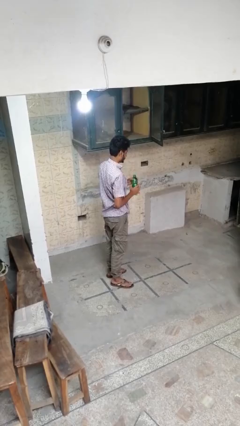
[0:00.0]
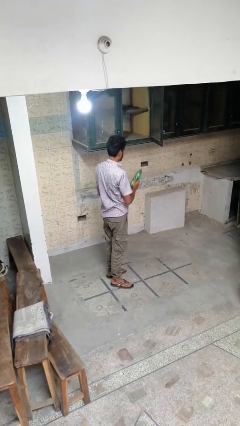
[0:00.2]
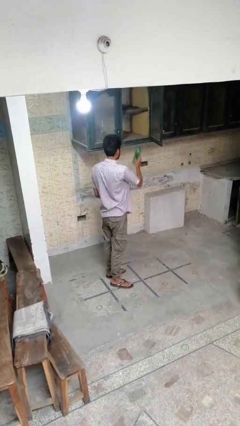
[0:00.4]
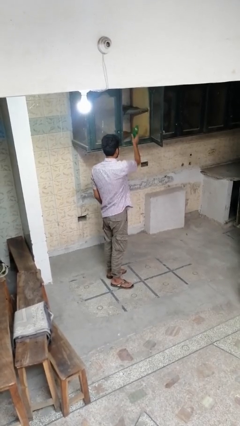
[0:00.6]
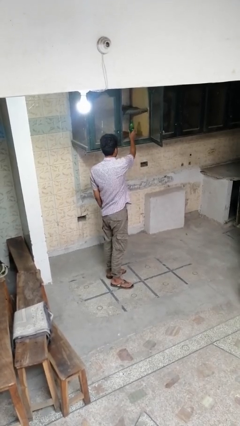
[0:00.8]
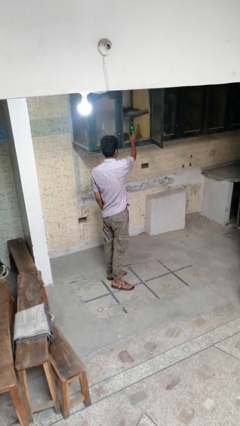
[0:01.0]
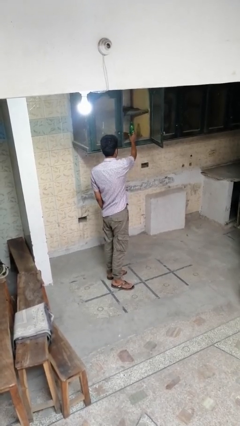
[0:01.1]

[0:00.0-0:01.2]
person puts down object into cabinet

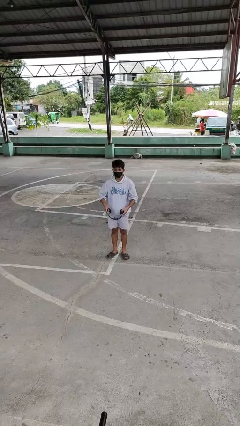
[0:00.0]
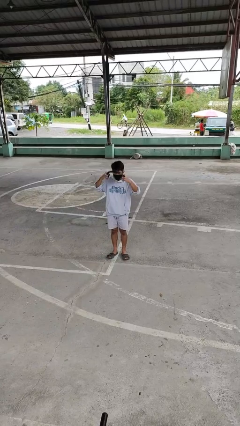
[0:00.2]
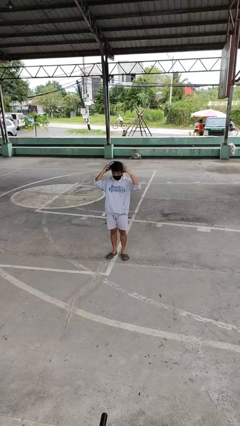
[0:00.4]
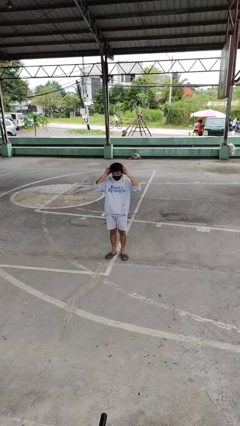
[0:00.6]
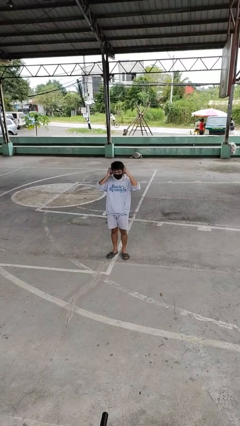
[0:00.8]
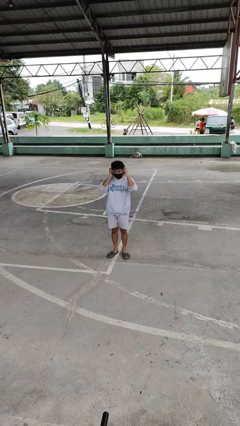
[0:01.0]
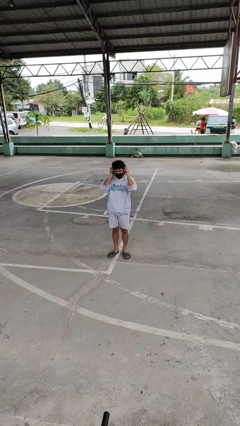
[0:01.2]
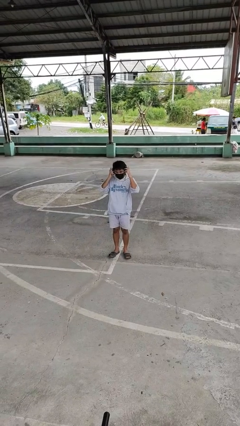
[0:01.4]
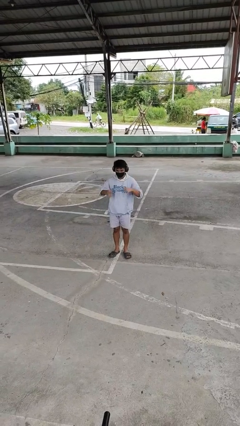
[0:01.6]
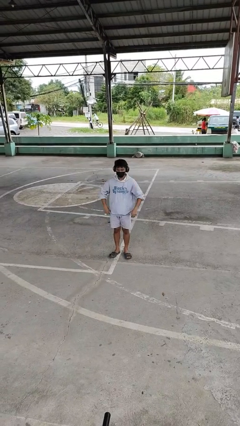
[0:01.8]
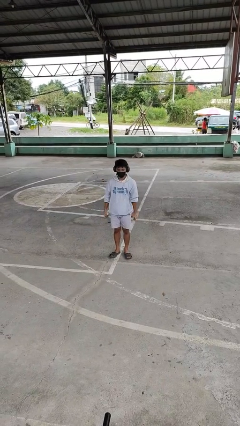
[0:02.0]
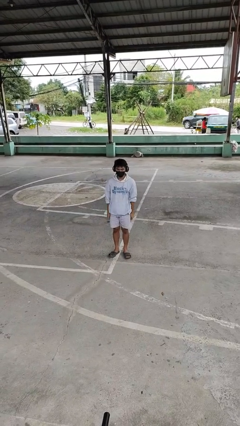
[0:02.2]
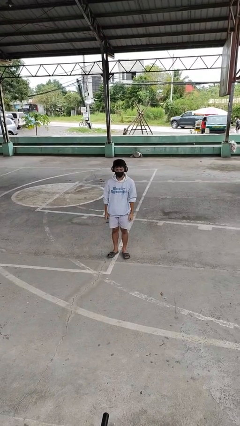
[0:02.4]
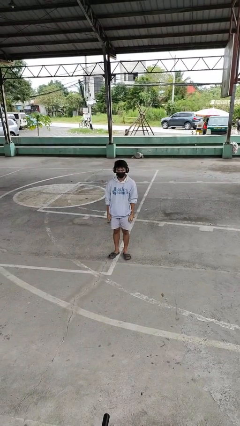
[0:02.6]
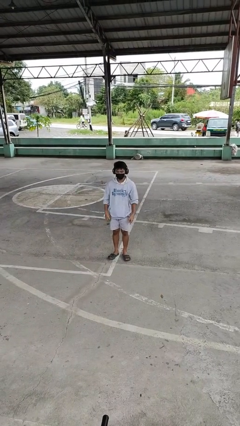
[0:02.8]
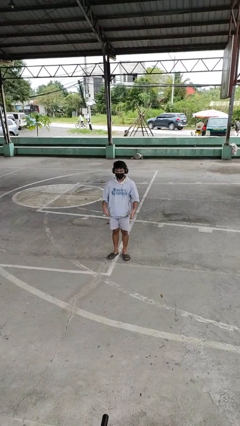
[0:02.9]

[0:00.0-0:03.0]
person puts on headphones

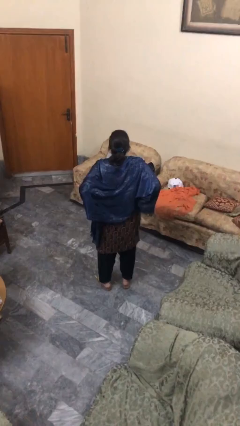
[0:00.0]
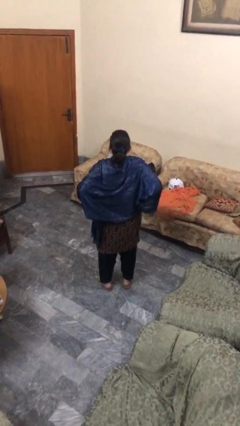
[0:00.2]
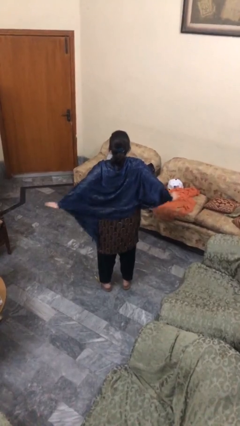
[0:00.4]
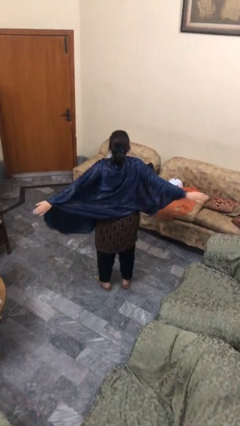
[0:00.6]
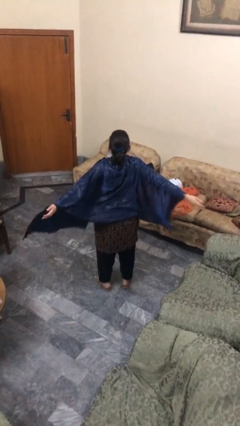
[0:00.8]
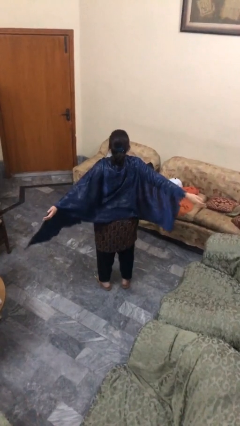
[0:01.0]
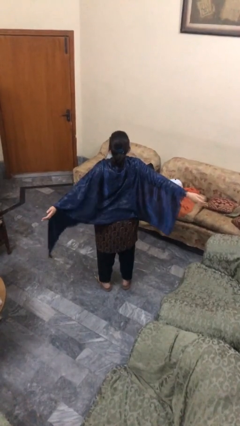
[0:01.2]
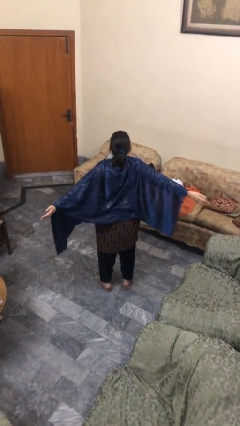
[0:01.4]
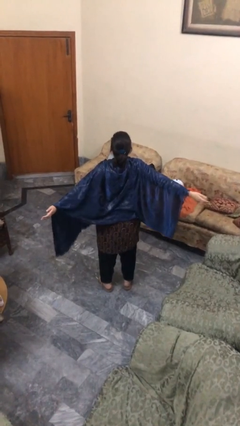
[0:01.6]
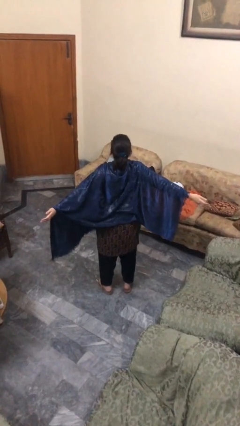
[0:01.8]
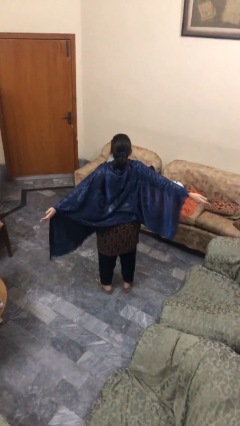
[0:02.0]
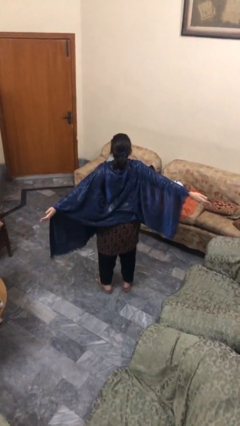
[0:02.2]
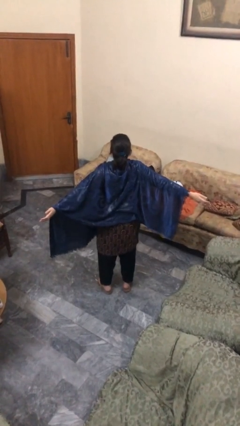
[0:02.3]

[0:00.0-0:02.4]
person stretches arms to side

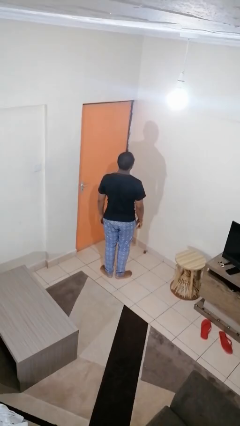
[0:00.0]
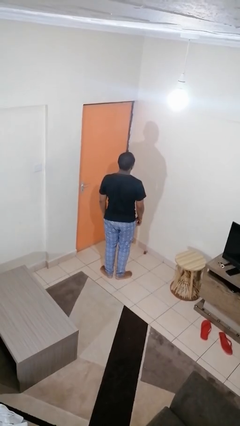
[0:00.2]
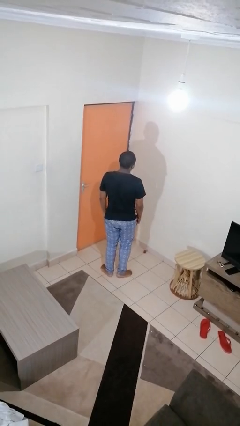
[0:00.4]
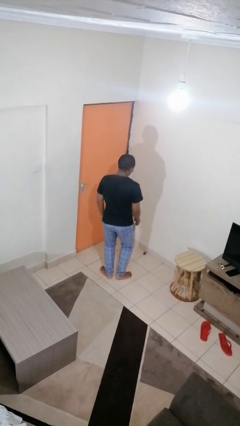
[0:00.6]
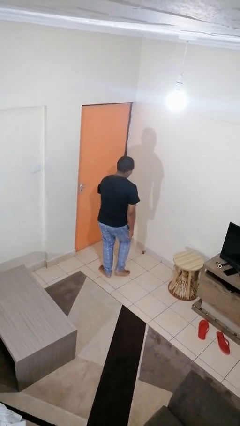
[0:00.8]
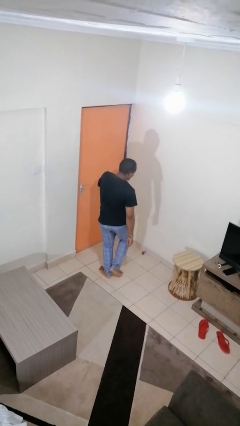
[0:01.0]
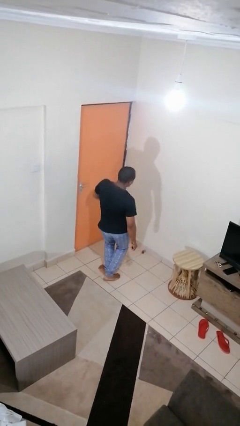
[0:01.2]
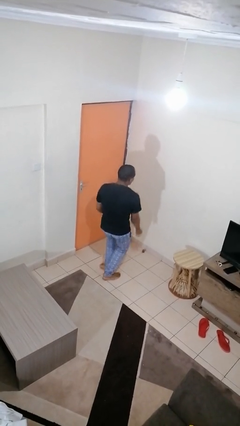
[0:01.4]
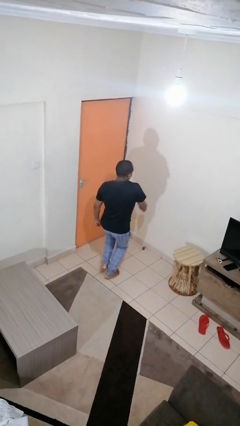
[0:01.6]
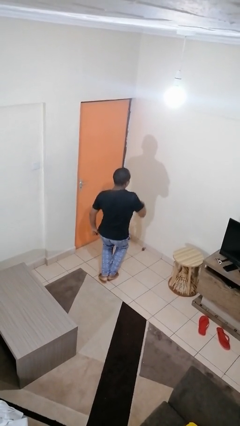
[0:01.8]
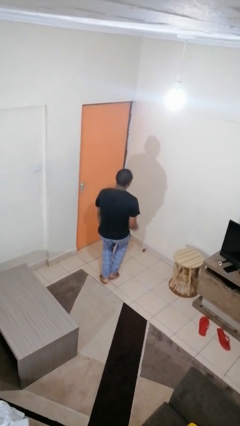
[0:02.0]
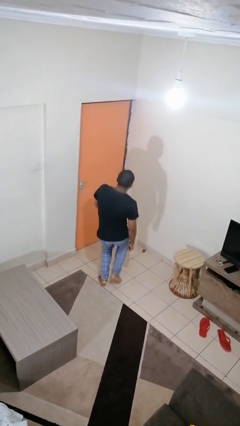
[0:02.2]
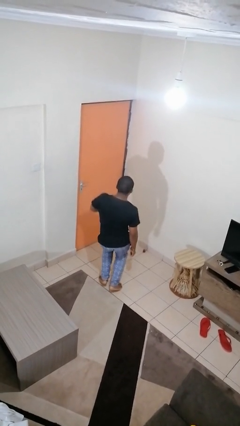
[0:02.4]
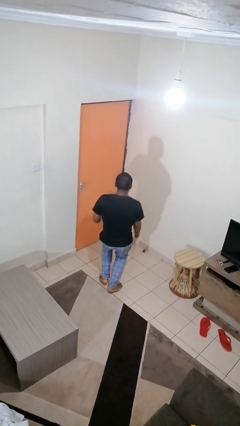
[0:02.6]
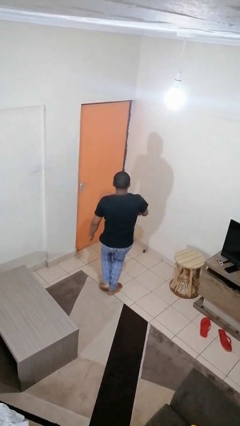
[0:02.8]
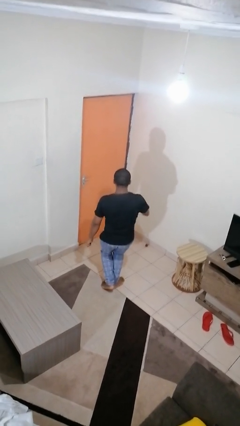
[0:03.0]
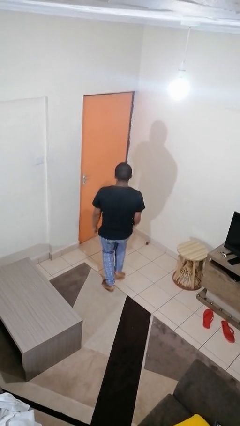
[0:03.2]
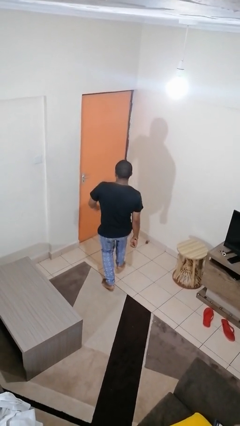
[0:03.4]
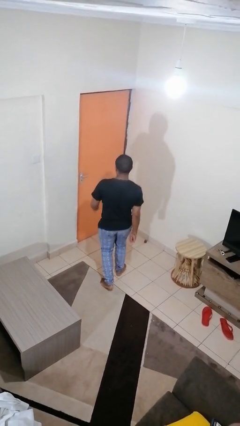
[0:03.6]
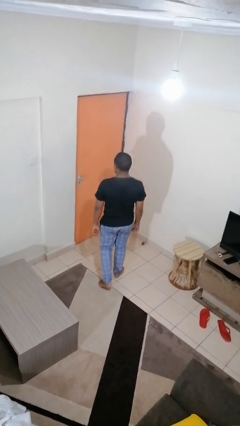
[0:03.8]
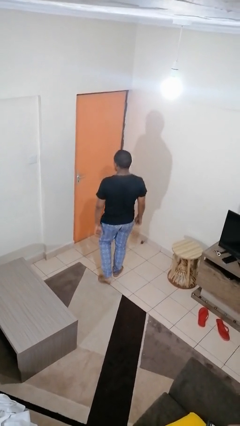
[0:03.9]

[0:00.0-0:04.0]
person dances in place

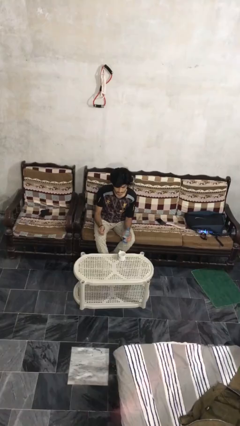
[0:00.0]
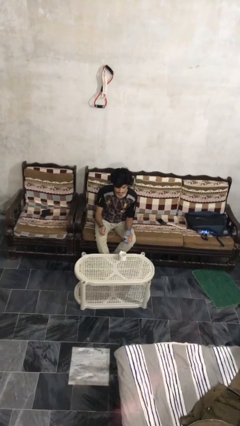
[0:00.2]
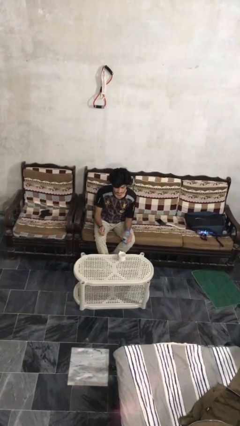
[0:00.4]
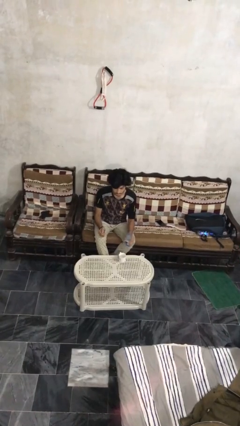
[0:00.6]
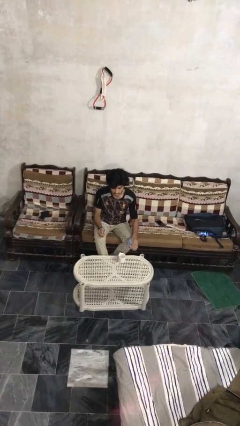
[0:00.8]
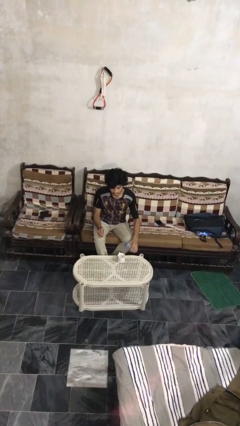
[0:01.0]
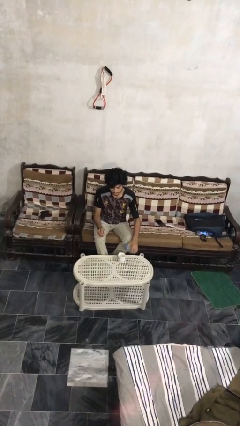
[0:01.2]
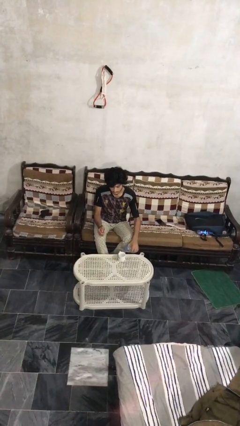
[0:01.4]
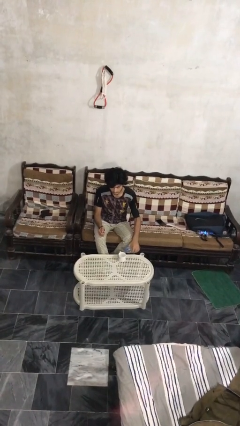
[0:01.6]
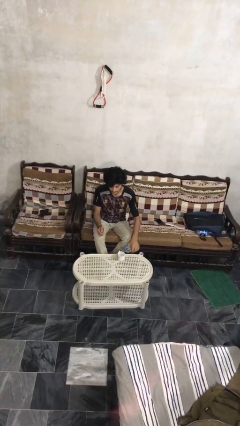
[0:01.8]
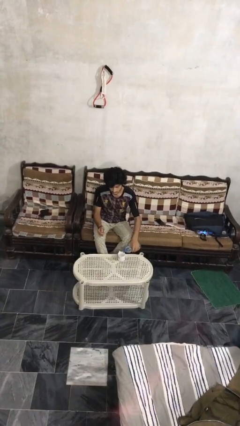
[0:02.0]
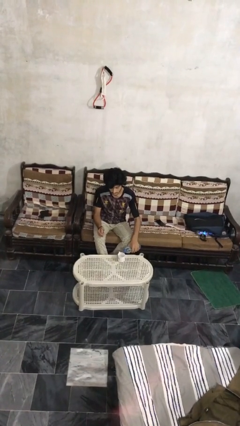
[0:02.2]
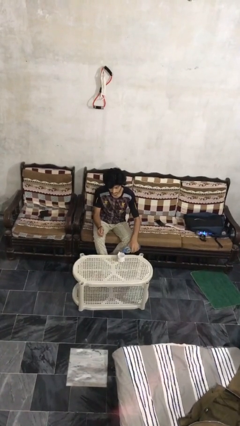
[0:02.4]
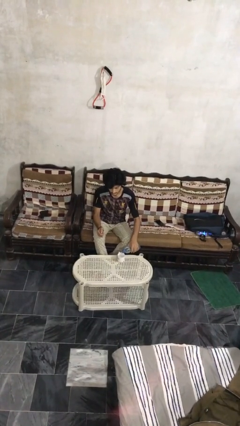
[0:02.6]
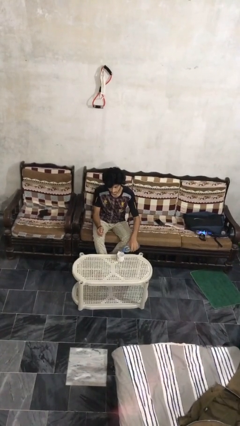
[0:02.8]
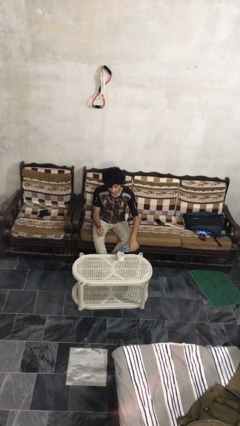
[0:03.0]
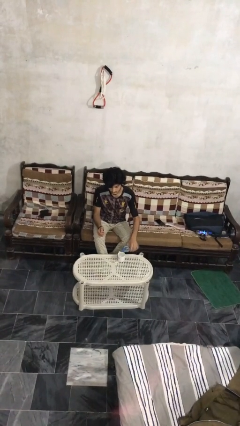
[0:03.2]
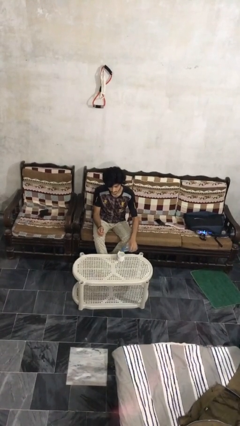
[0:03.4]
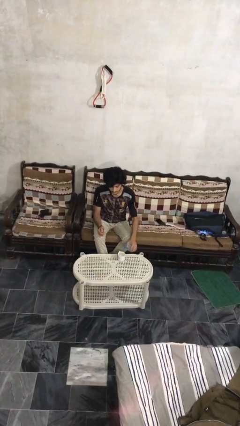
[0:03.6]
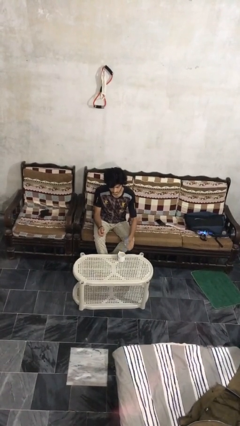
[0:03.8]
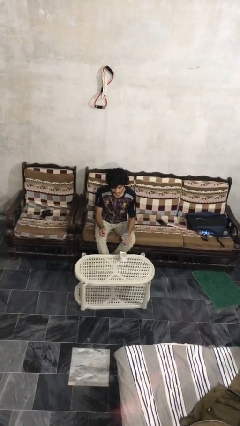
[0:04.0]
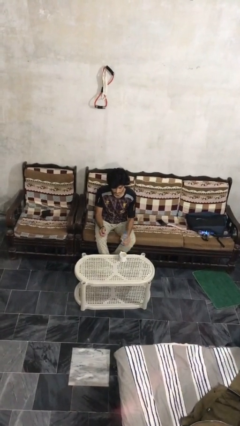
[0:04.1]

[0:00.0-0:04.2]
person pours liquid into cup

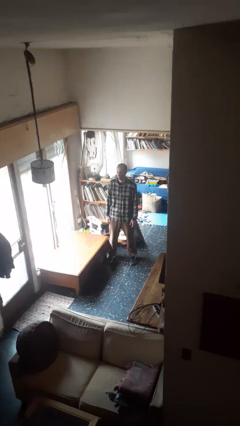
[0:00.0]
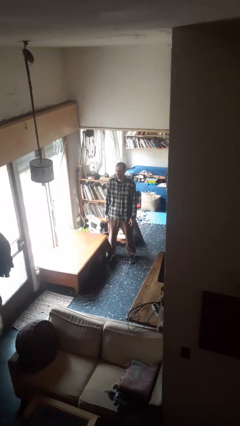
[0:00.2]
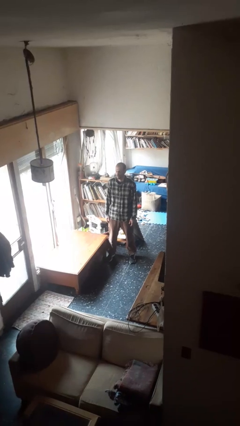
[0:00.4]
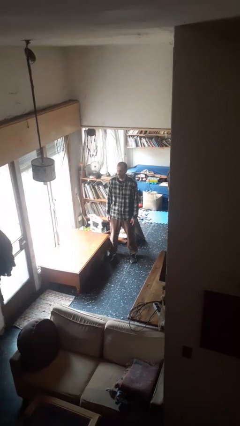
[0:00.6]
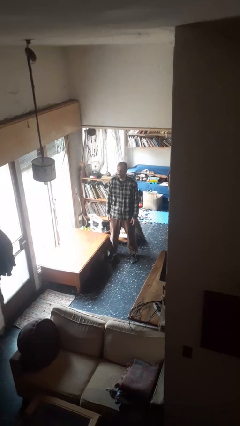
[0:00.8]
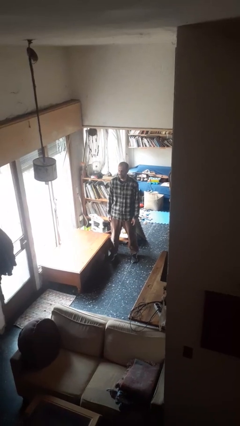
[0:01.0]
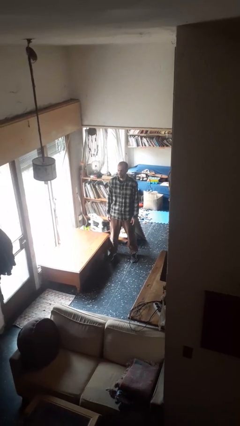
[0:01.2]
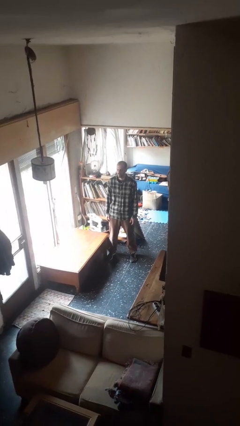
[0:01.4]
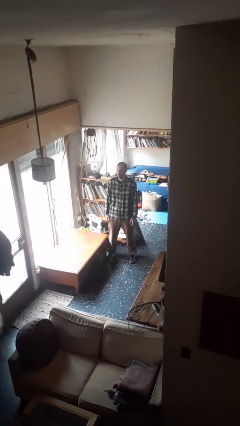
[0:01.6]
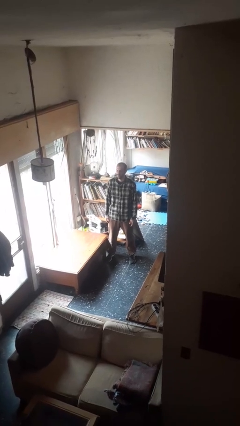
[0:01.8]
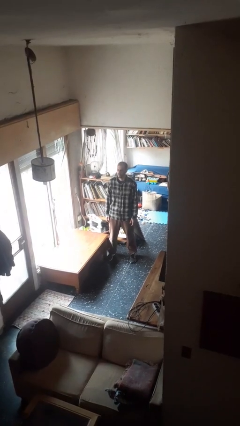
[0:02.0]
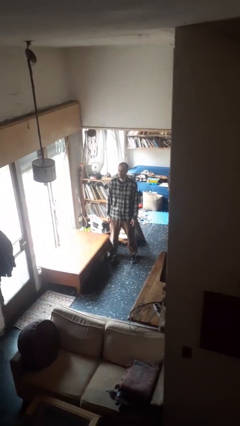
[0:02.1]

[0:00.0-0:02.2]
person sticks out tongue

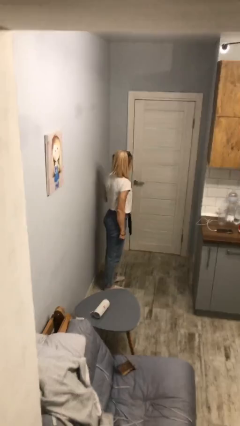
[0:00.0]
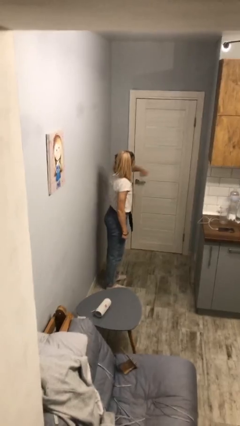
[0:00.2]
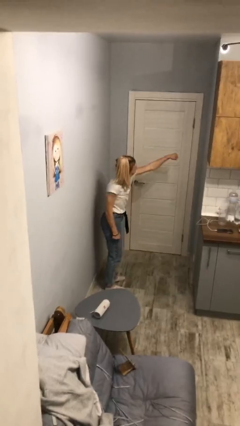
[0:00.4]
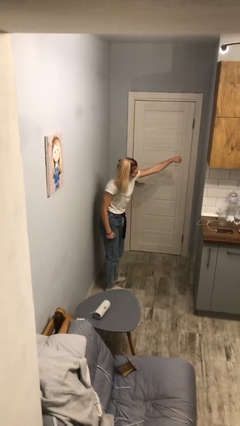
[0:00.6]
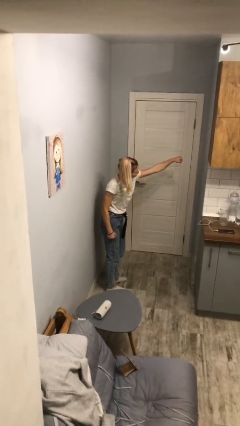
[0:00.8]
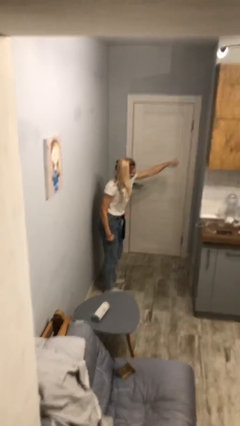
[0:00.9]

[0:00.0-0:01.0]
person punches
